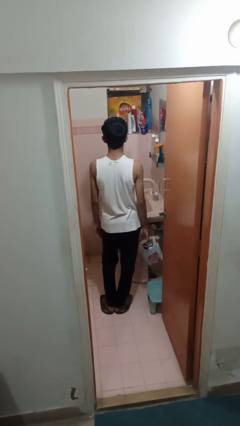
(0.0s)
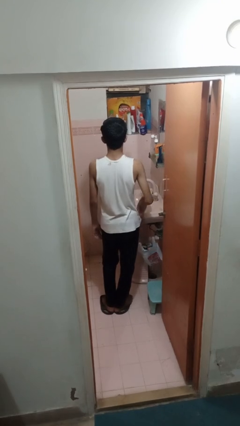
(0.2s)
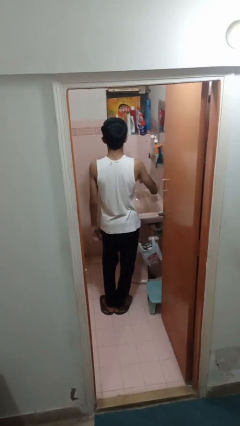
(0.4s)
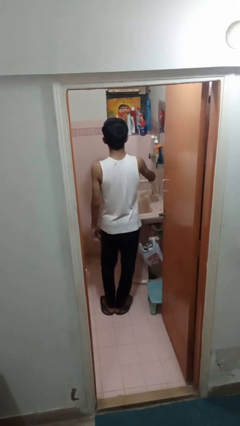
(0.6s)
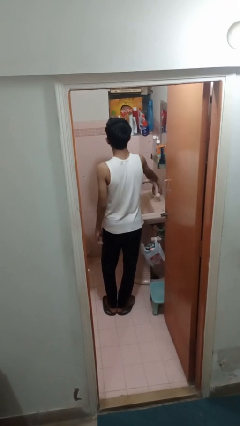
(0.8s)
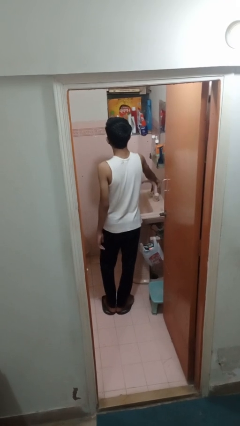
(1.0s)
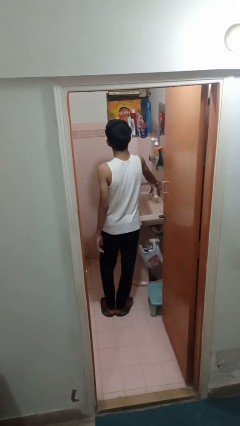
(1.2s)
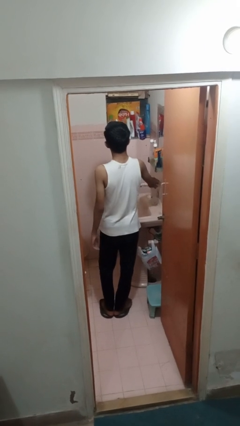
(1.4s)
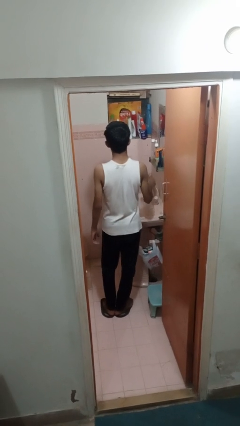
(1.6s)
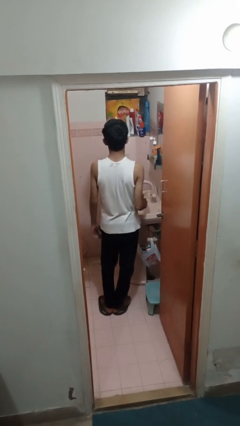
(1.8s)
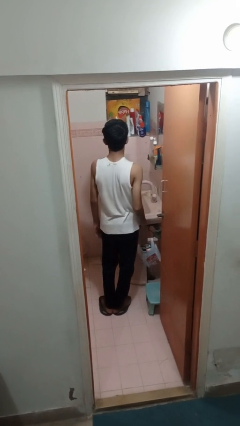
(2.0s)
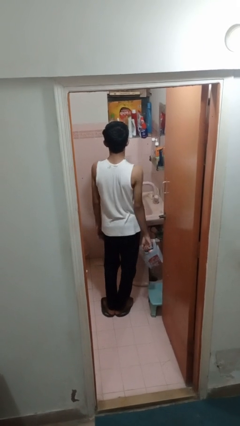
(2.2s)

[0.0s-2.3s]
person turns off faucet

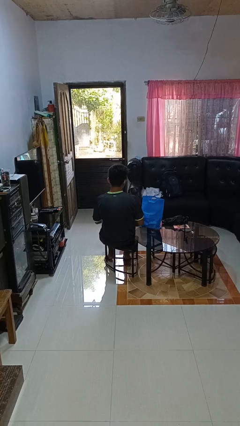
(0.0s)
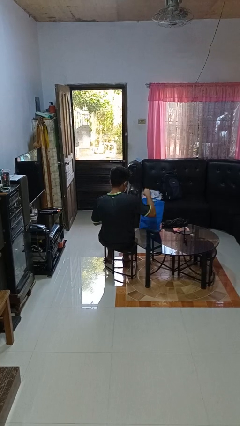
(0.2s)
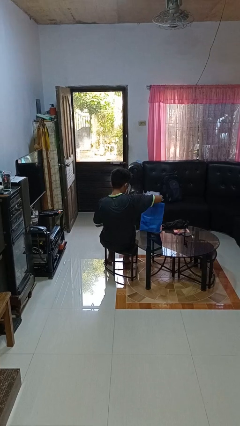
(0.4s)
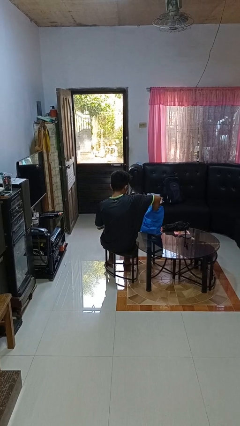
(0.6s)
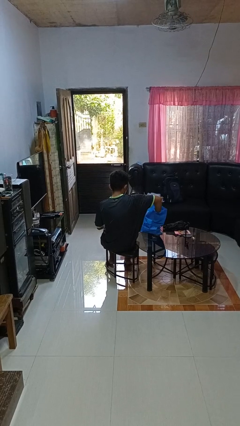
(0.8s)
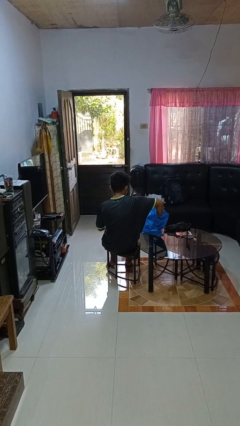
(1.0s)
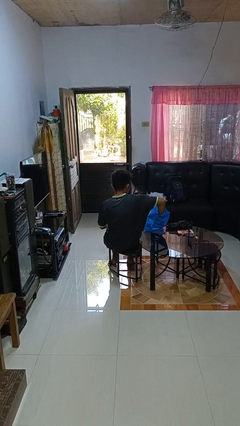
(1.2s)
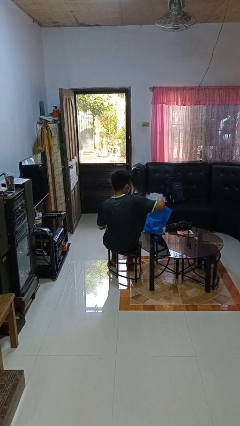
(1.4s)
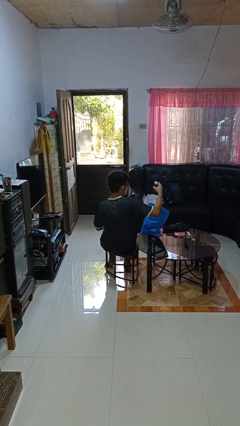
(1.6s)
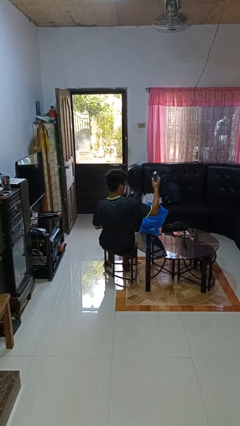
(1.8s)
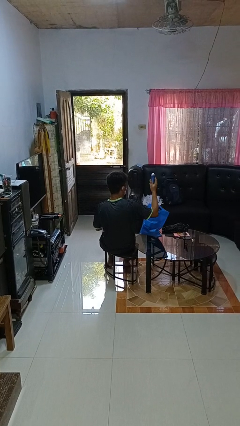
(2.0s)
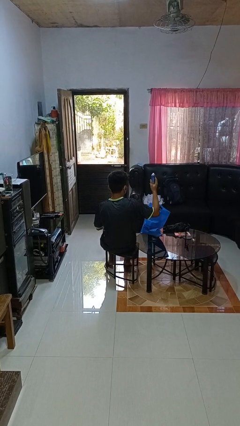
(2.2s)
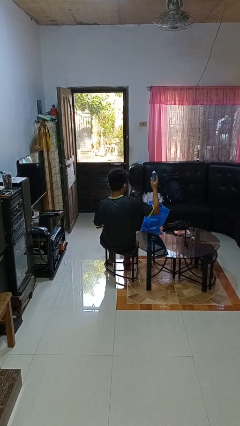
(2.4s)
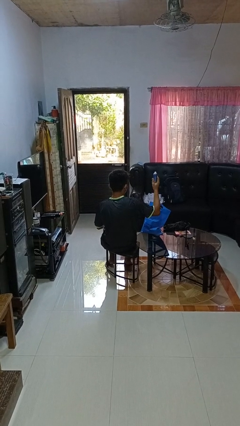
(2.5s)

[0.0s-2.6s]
person takes object from bag

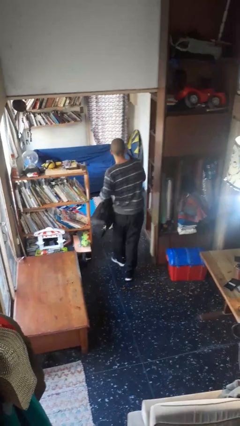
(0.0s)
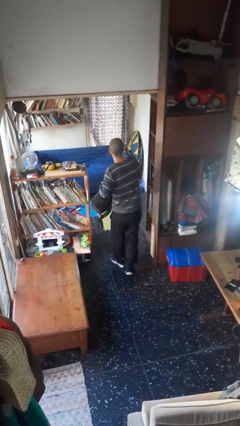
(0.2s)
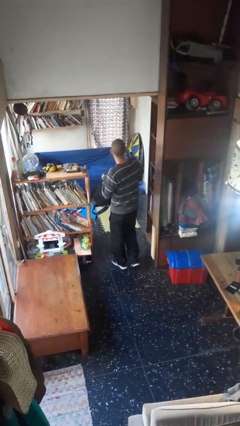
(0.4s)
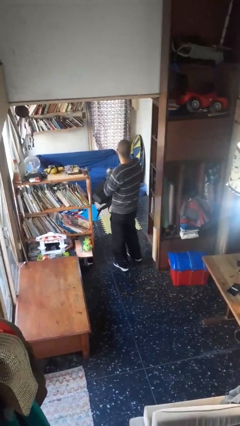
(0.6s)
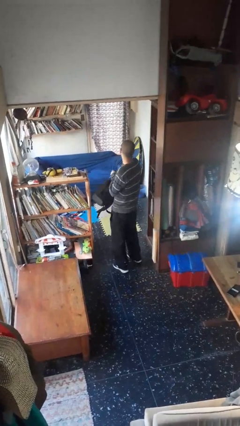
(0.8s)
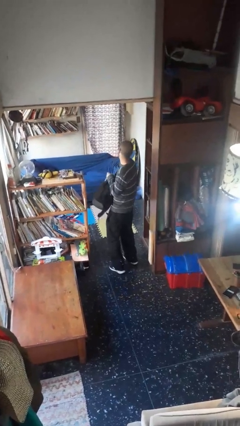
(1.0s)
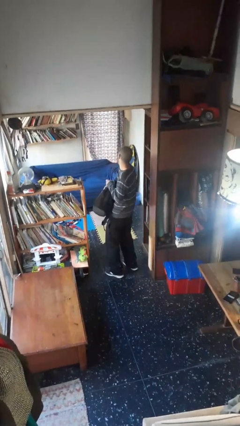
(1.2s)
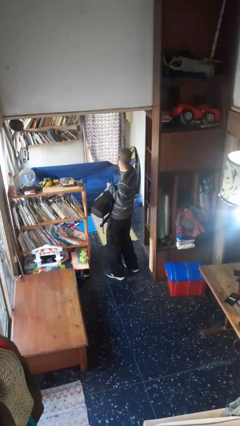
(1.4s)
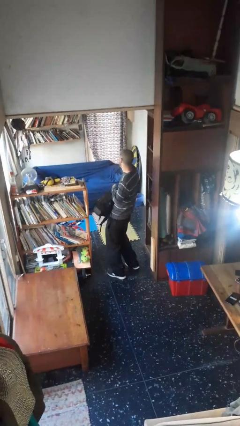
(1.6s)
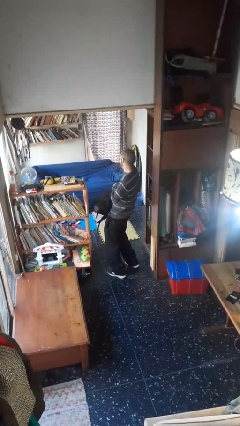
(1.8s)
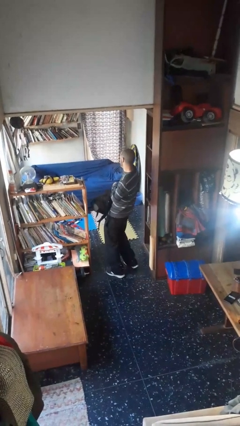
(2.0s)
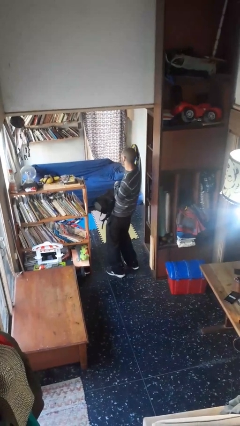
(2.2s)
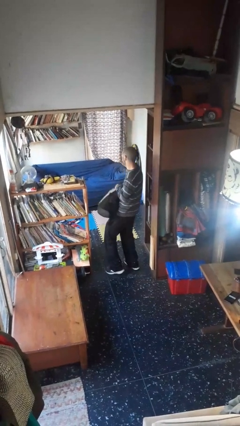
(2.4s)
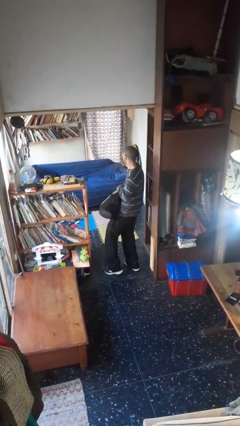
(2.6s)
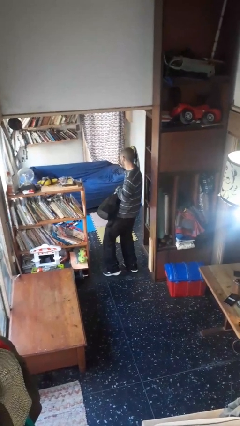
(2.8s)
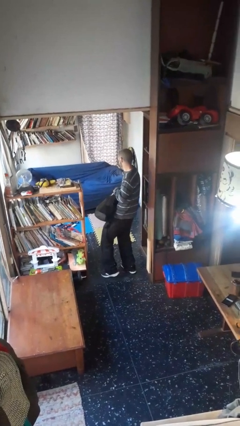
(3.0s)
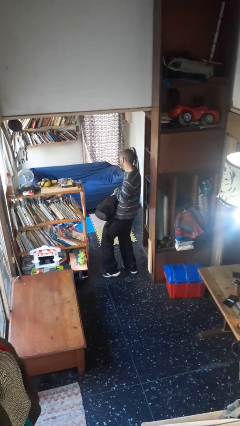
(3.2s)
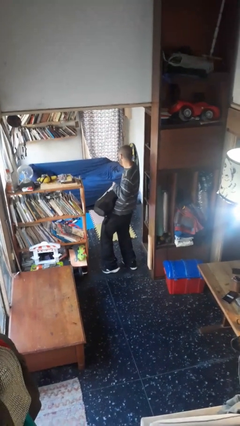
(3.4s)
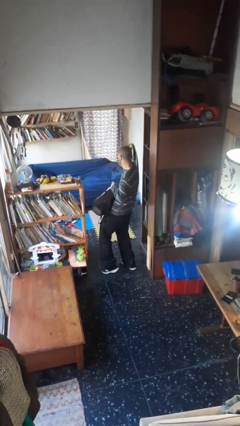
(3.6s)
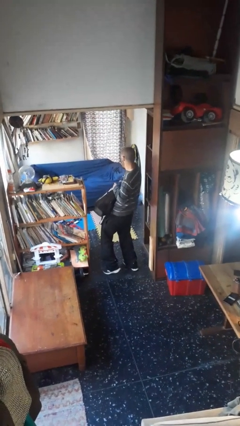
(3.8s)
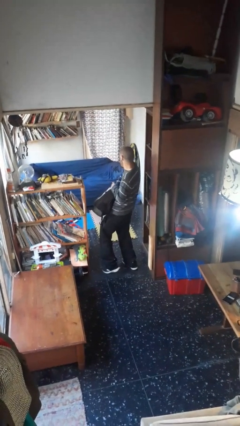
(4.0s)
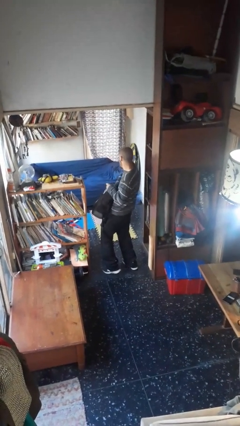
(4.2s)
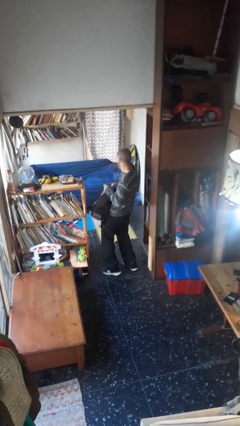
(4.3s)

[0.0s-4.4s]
person searches in backpack

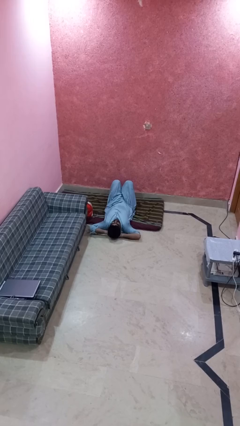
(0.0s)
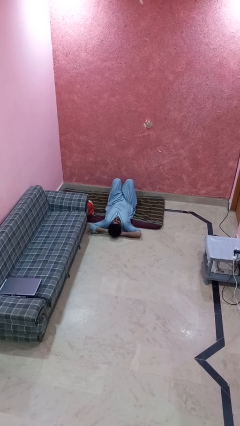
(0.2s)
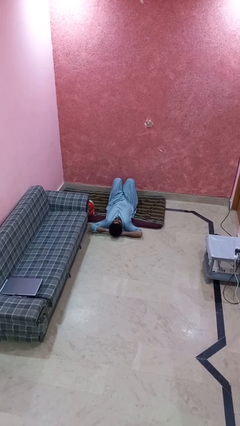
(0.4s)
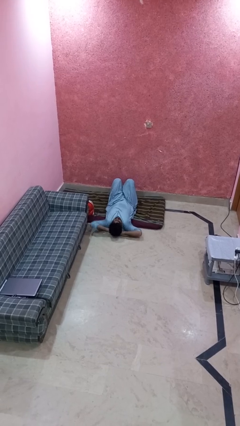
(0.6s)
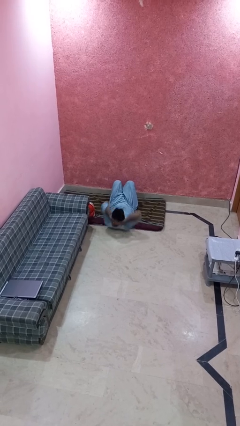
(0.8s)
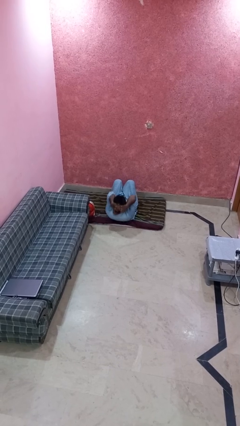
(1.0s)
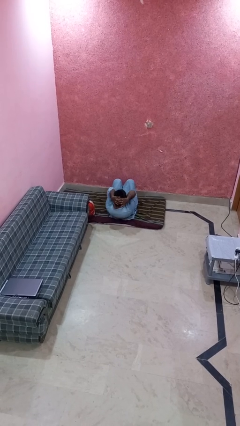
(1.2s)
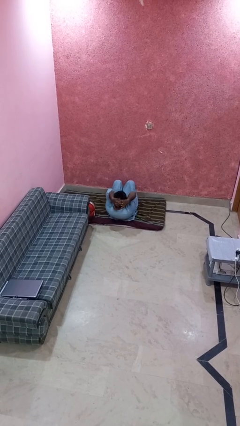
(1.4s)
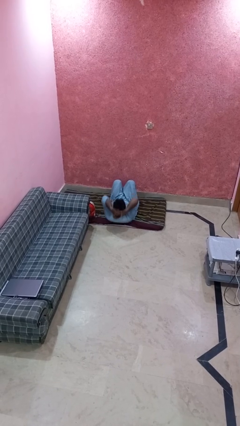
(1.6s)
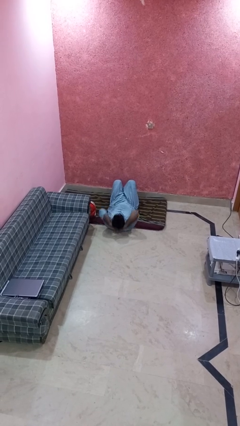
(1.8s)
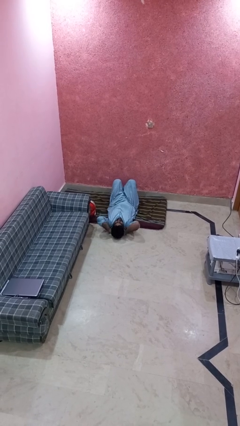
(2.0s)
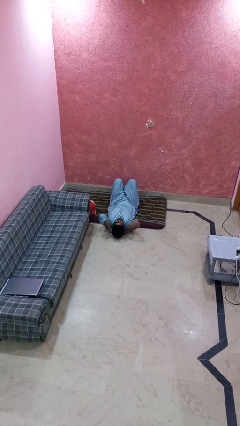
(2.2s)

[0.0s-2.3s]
person exercises with situp

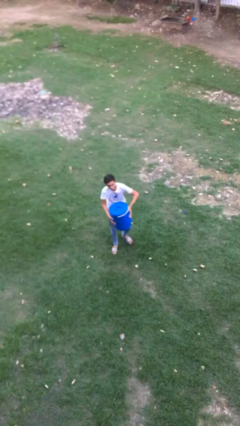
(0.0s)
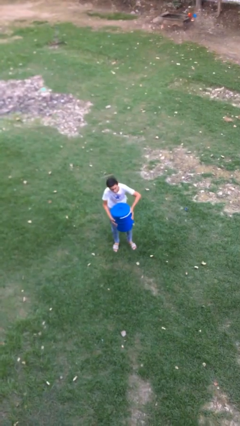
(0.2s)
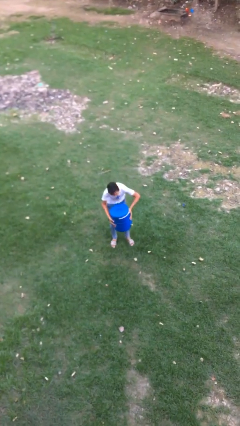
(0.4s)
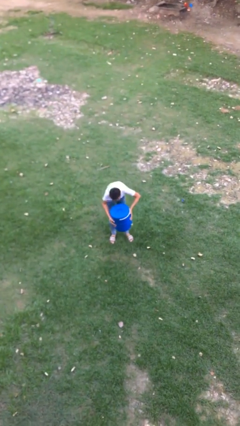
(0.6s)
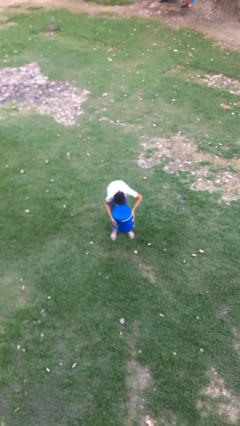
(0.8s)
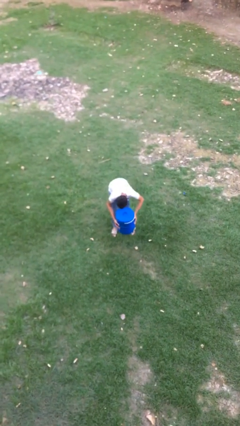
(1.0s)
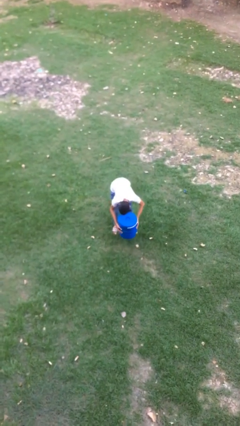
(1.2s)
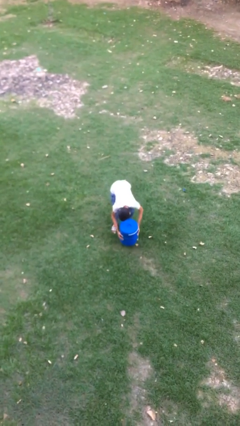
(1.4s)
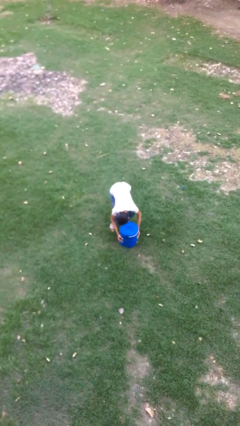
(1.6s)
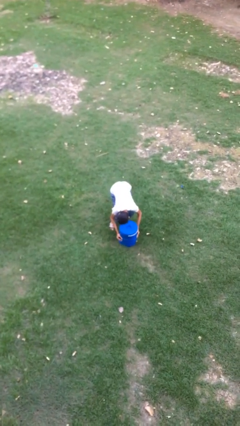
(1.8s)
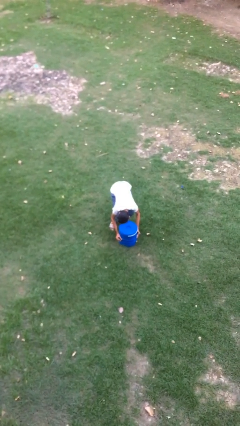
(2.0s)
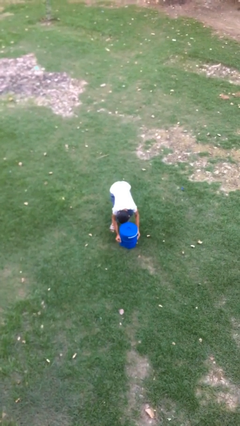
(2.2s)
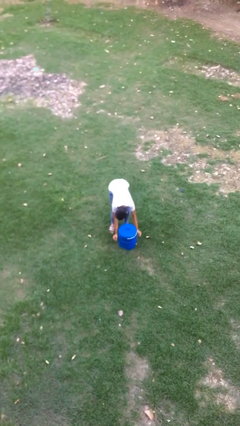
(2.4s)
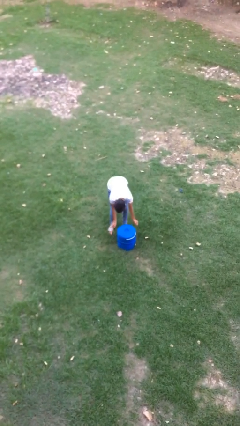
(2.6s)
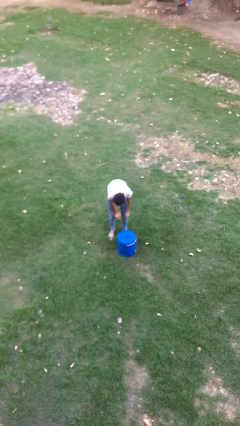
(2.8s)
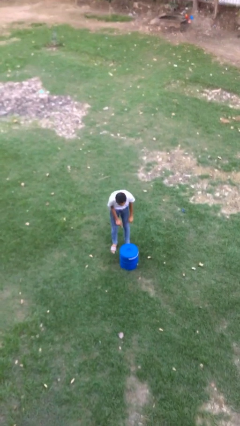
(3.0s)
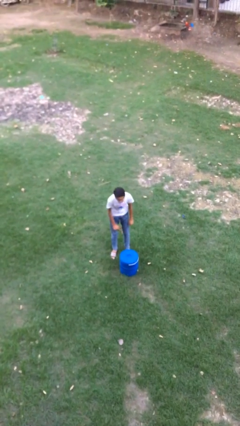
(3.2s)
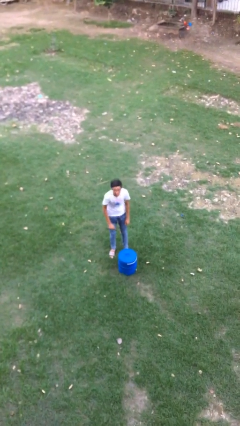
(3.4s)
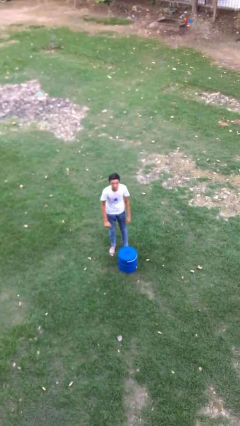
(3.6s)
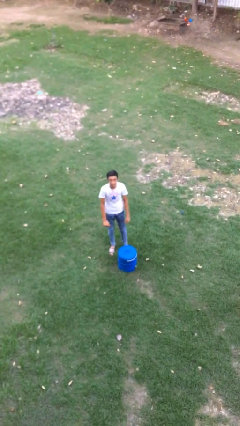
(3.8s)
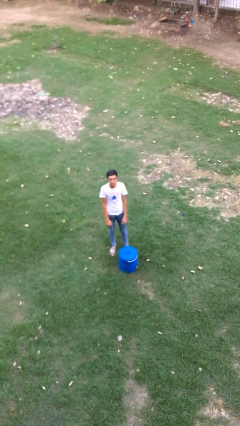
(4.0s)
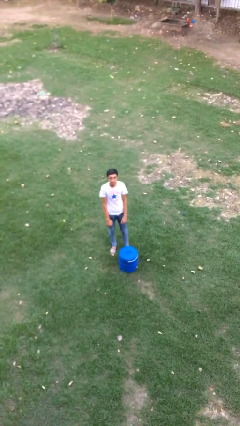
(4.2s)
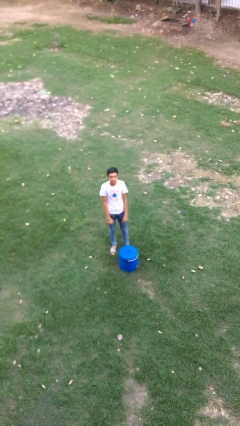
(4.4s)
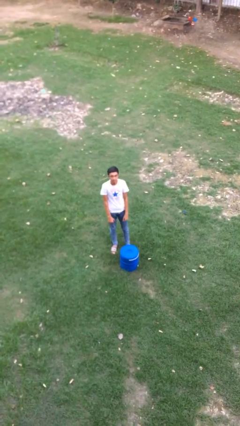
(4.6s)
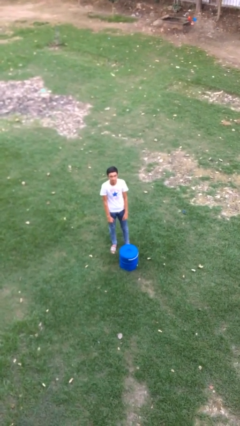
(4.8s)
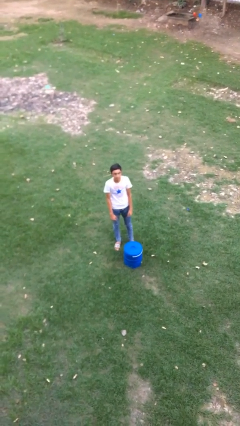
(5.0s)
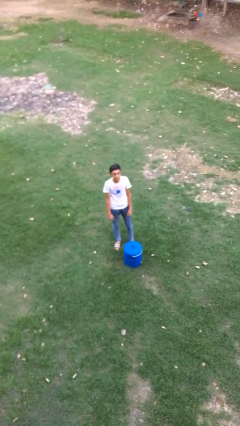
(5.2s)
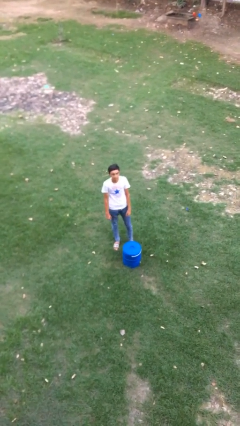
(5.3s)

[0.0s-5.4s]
person puts down object on floor

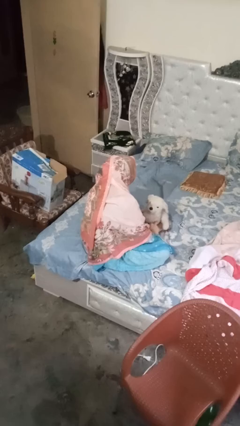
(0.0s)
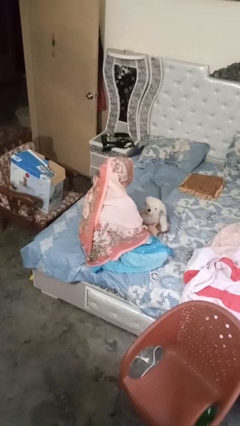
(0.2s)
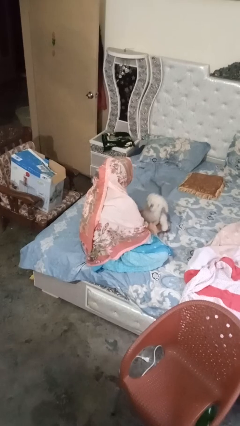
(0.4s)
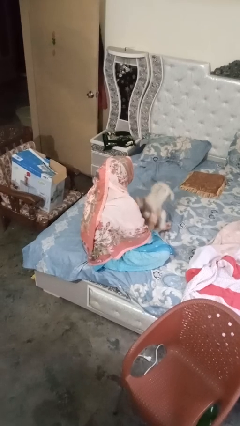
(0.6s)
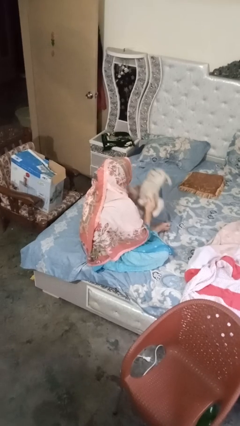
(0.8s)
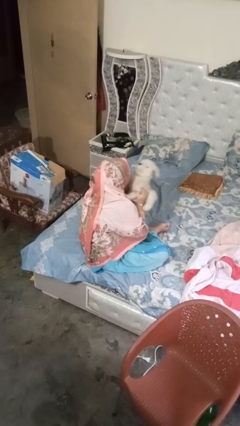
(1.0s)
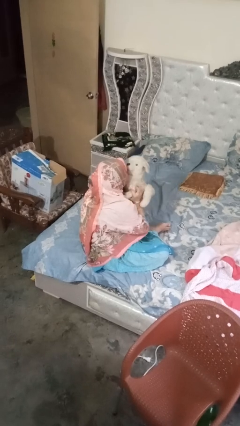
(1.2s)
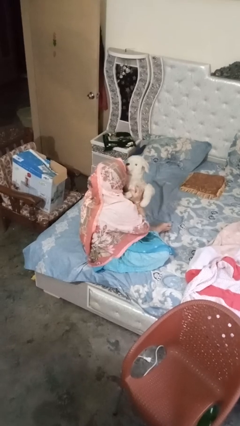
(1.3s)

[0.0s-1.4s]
person hugs stuffed animal
